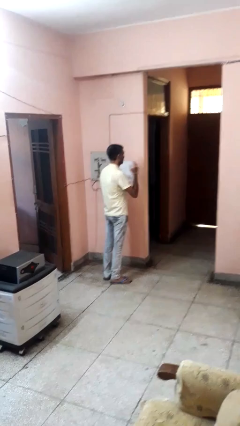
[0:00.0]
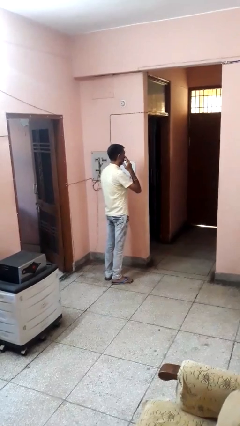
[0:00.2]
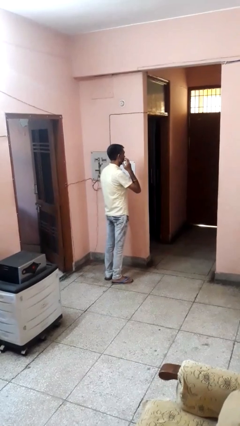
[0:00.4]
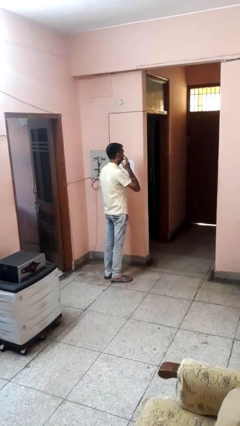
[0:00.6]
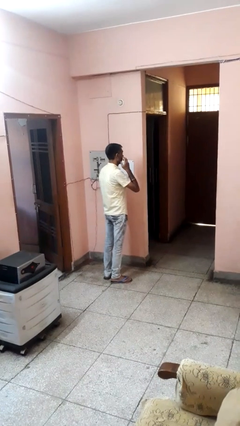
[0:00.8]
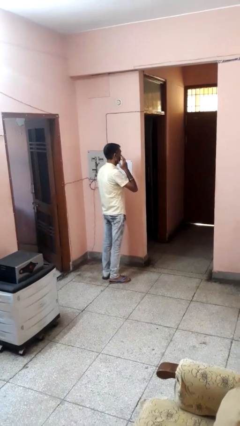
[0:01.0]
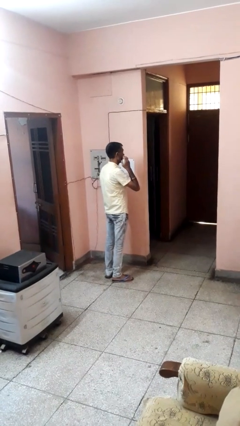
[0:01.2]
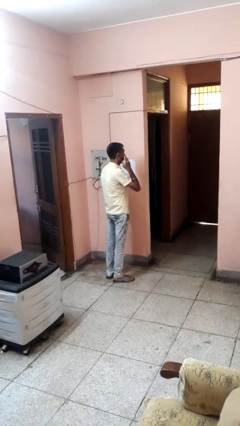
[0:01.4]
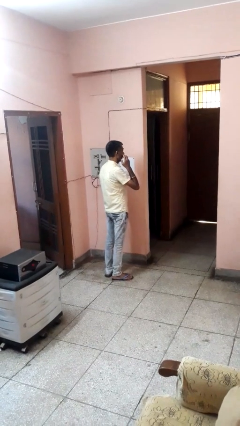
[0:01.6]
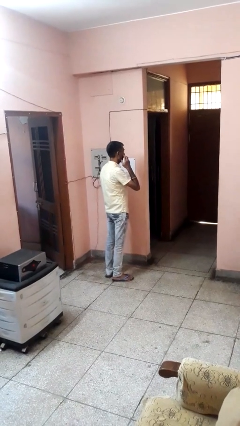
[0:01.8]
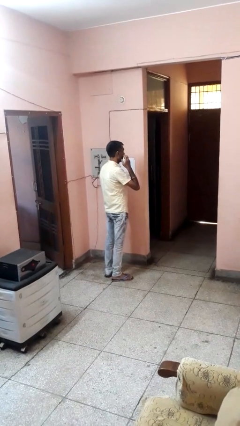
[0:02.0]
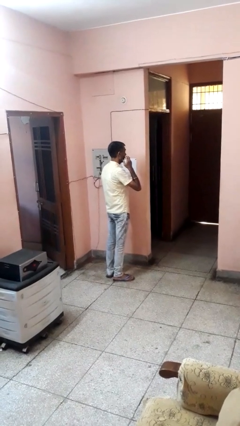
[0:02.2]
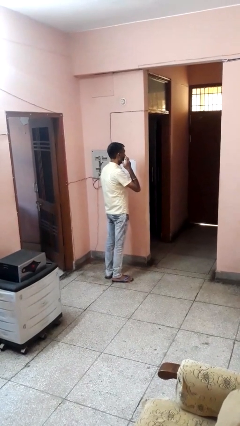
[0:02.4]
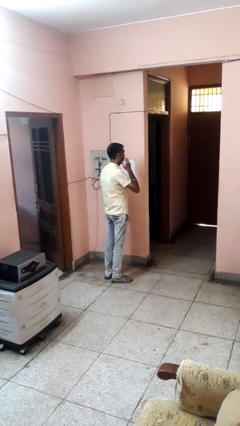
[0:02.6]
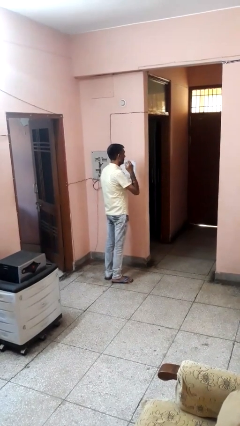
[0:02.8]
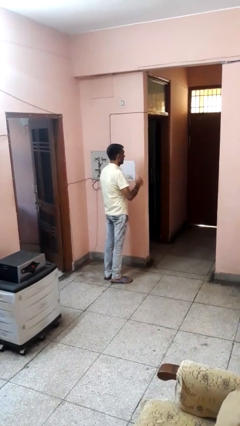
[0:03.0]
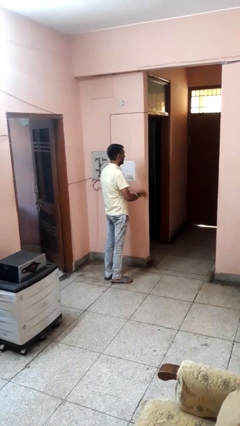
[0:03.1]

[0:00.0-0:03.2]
person scratches face

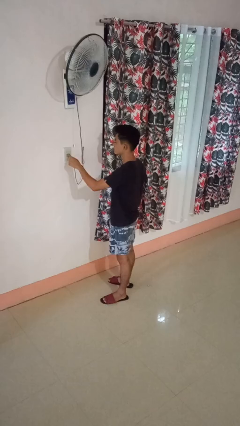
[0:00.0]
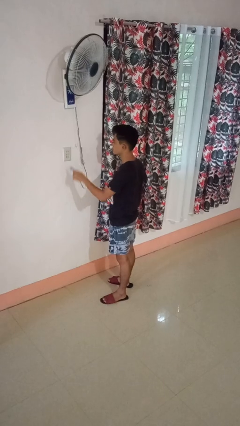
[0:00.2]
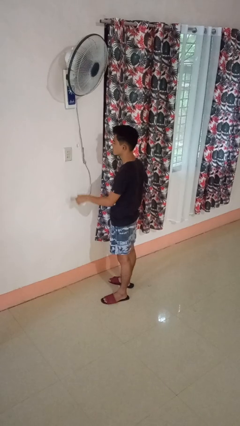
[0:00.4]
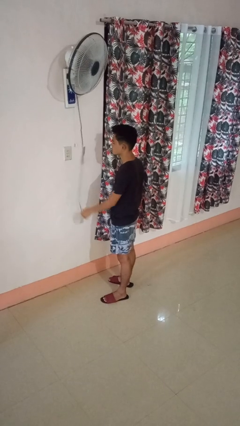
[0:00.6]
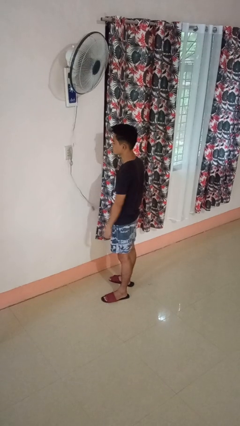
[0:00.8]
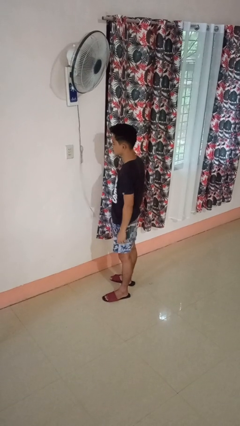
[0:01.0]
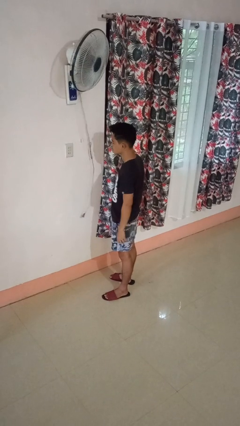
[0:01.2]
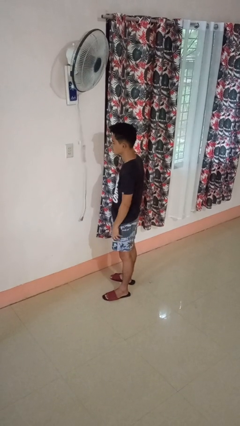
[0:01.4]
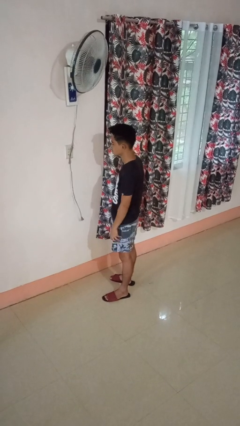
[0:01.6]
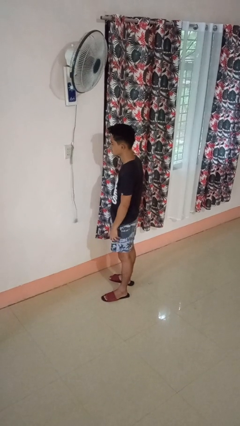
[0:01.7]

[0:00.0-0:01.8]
person unplugs from electrical socket

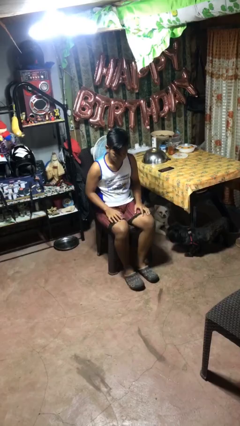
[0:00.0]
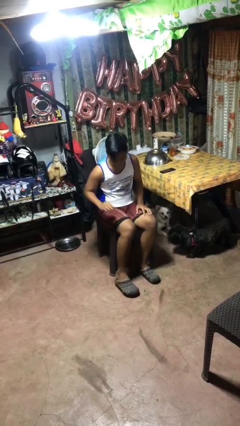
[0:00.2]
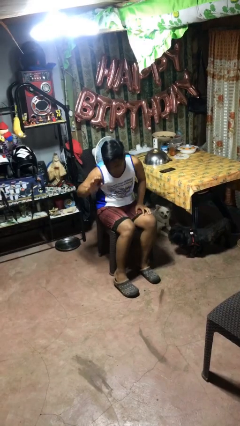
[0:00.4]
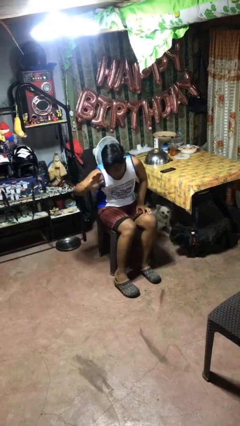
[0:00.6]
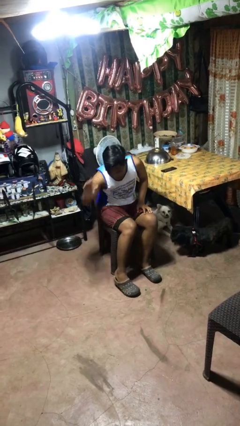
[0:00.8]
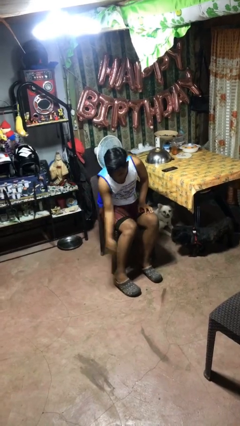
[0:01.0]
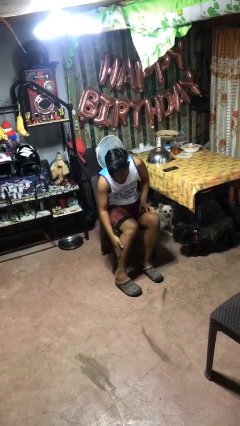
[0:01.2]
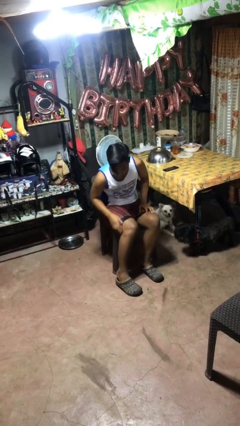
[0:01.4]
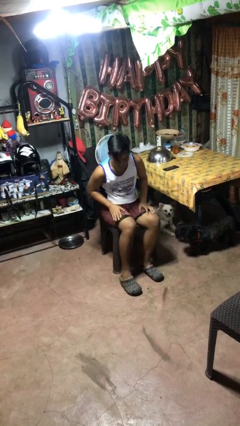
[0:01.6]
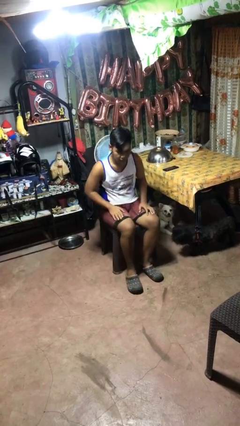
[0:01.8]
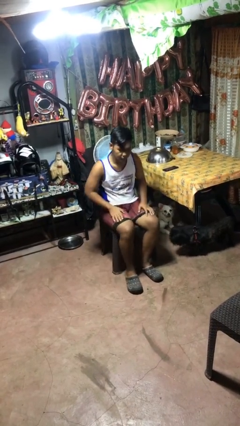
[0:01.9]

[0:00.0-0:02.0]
person swats bug

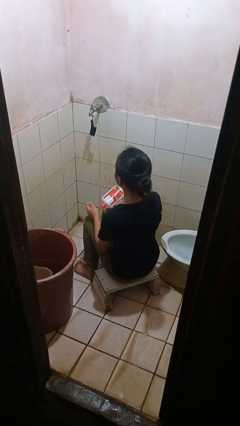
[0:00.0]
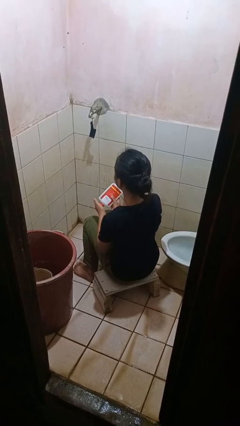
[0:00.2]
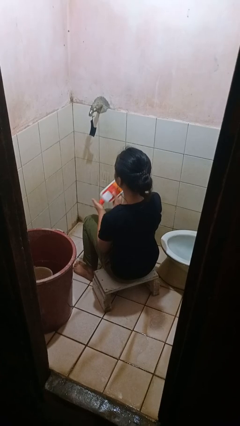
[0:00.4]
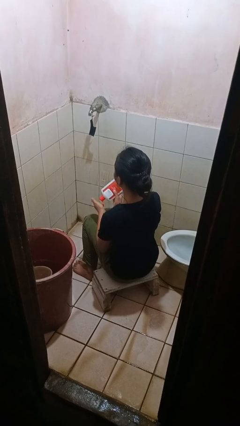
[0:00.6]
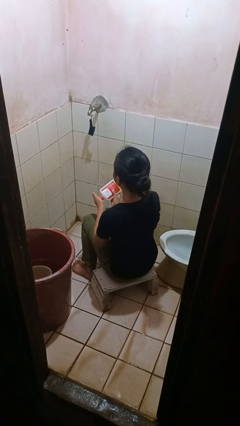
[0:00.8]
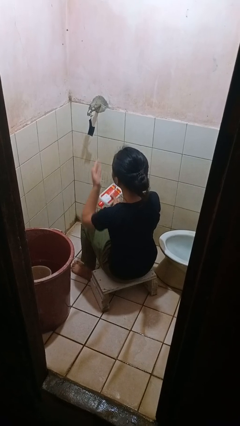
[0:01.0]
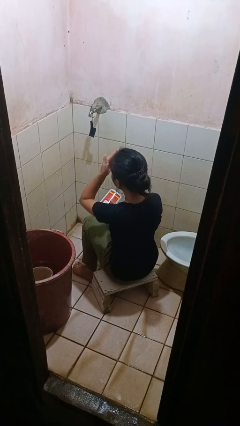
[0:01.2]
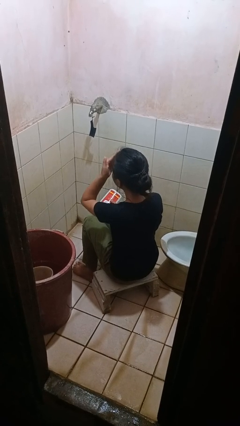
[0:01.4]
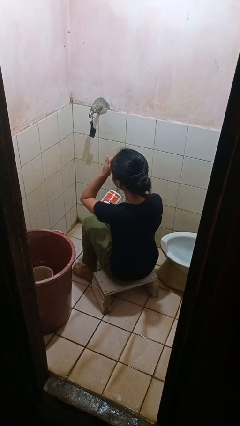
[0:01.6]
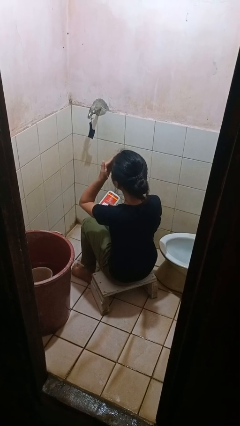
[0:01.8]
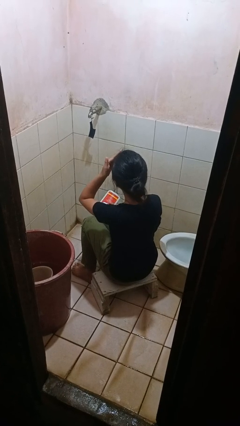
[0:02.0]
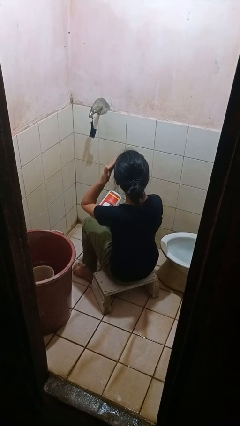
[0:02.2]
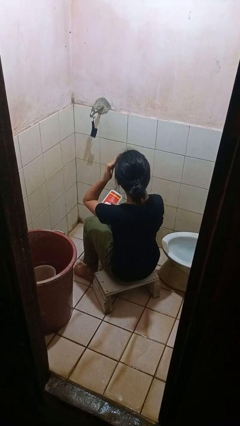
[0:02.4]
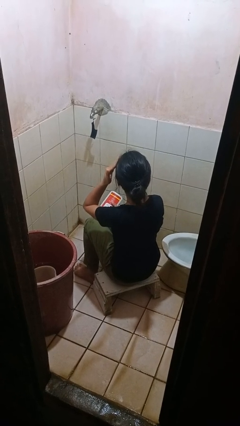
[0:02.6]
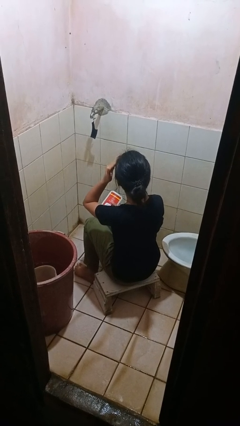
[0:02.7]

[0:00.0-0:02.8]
person applies facial moisturizer

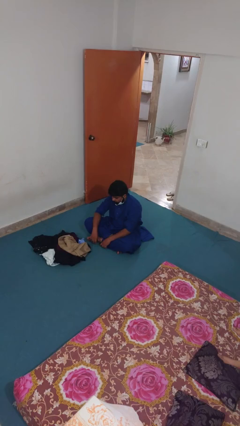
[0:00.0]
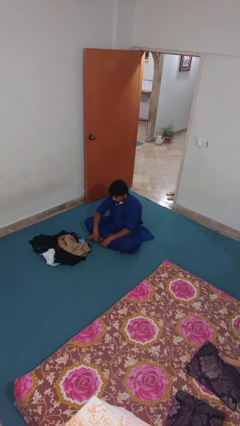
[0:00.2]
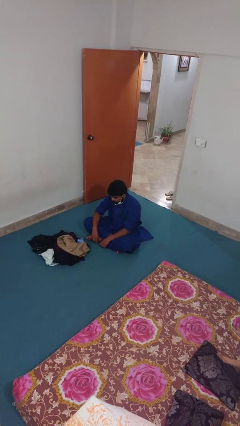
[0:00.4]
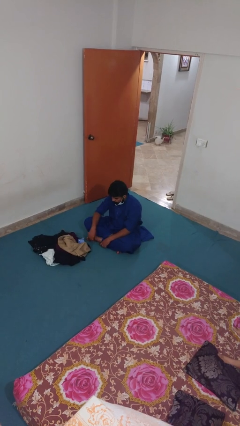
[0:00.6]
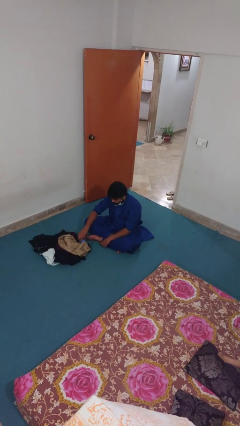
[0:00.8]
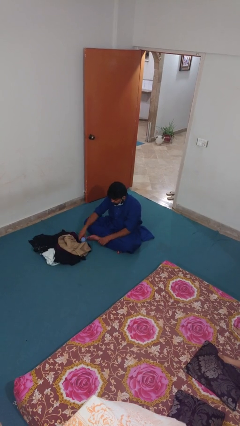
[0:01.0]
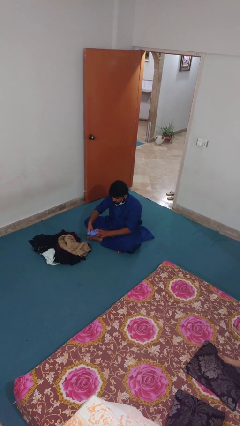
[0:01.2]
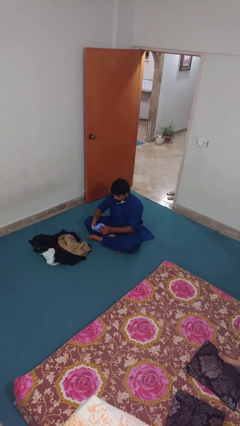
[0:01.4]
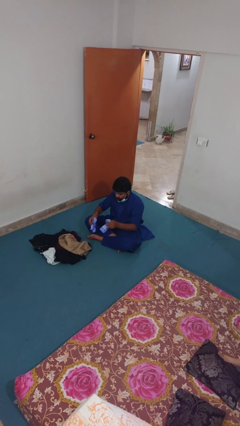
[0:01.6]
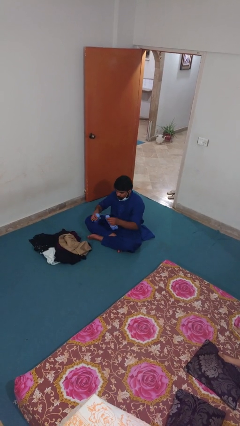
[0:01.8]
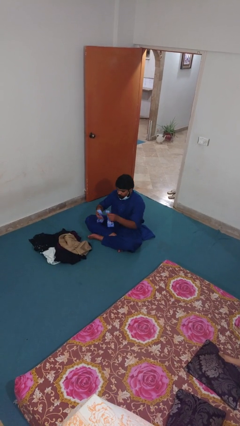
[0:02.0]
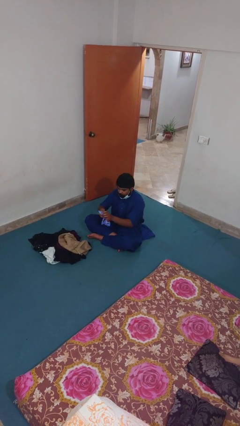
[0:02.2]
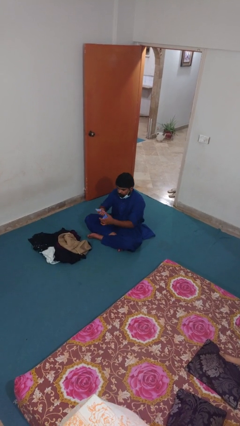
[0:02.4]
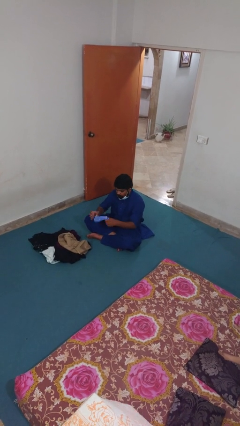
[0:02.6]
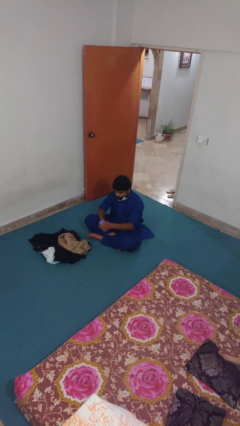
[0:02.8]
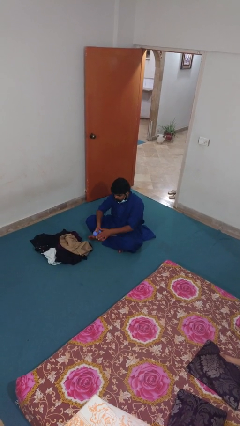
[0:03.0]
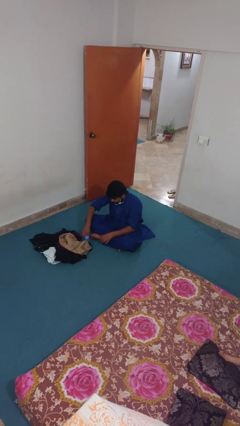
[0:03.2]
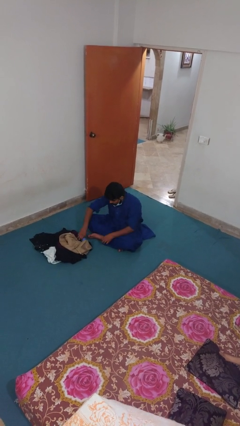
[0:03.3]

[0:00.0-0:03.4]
person folds socks

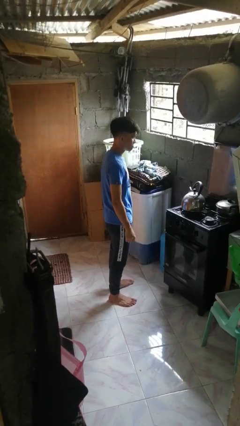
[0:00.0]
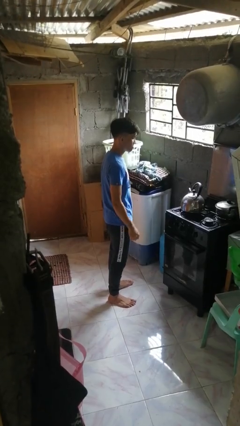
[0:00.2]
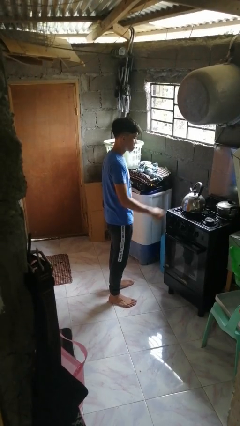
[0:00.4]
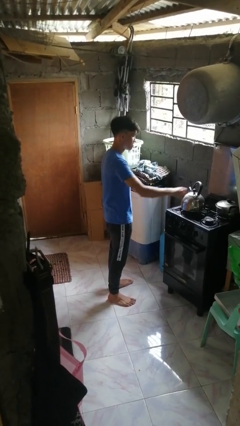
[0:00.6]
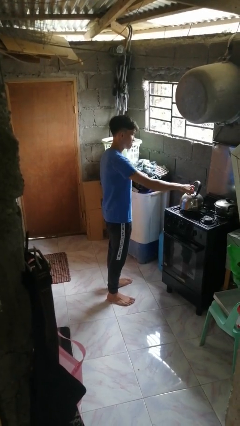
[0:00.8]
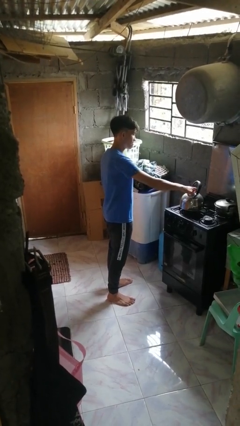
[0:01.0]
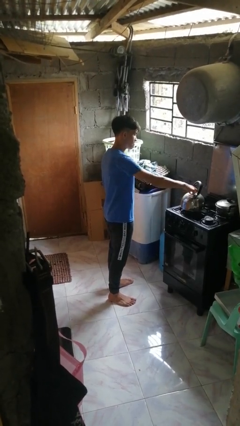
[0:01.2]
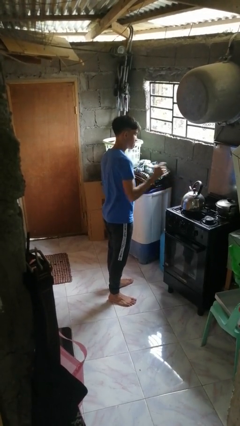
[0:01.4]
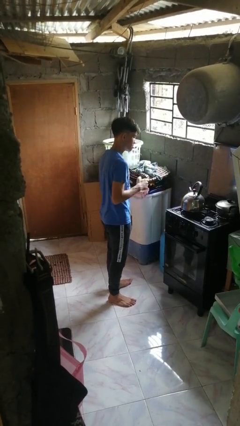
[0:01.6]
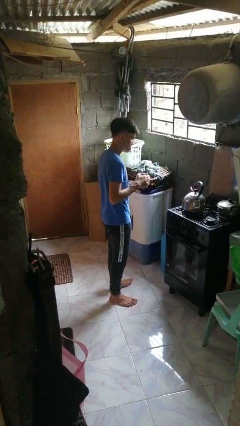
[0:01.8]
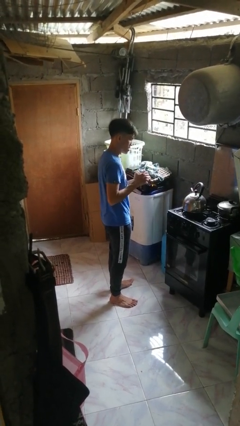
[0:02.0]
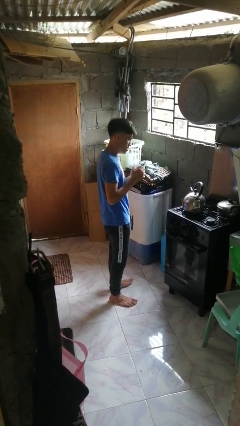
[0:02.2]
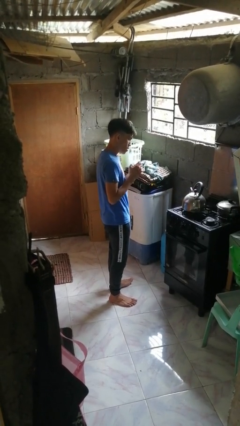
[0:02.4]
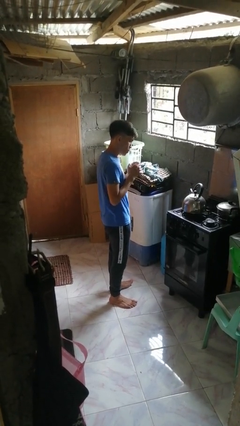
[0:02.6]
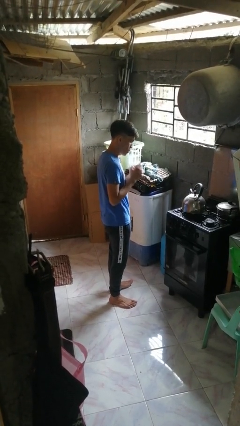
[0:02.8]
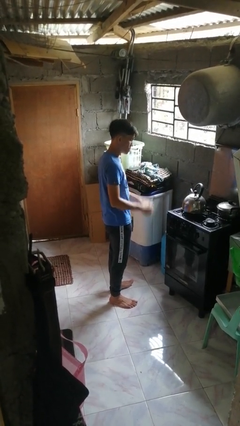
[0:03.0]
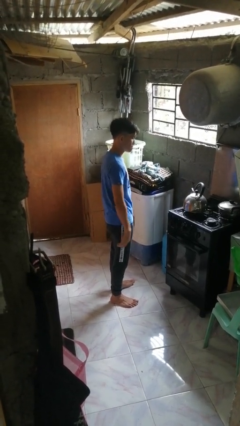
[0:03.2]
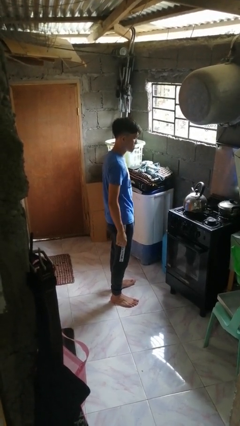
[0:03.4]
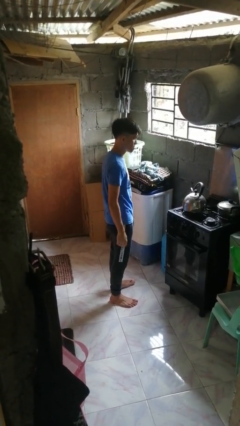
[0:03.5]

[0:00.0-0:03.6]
person burns hand

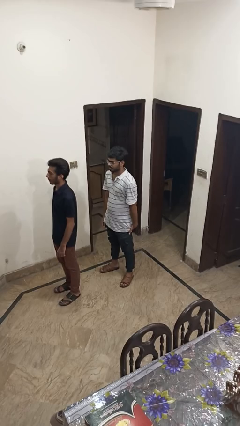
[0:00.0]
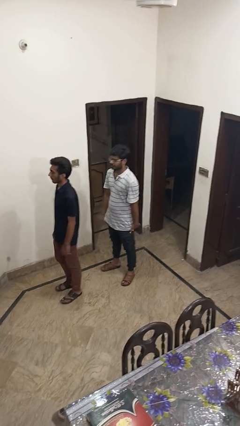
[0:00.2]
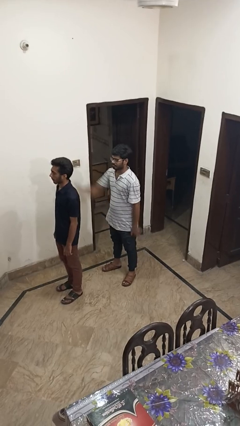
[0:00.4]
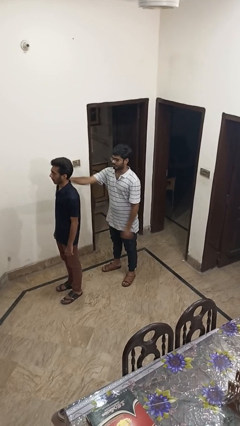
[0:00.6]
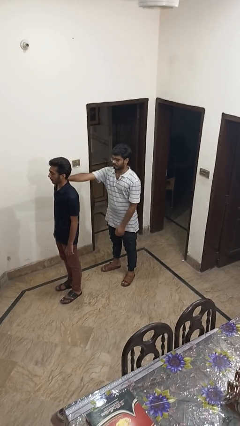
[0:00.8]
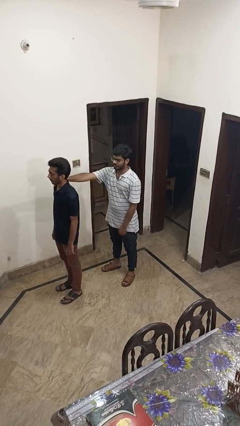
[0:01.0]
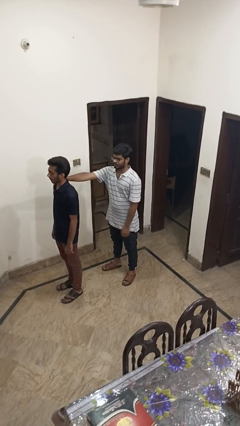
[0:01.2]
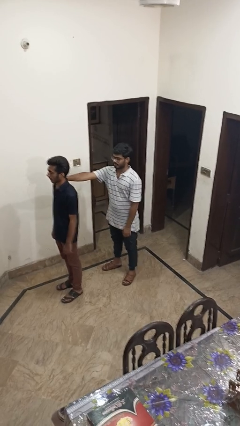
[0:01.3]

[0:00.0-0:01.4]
person grabs person by shoulder
